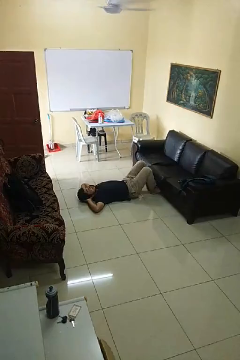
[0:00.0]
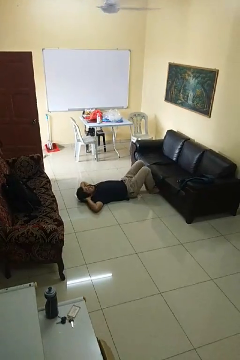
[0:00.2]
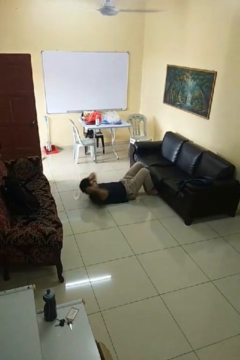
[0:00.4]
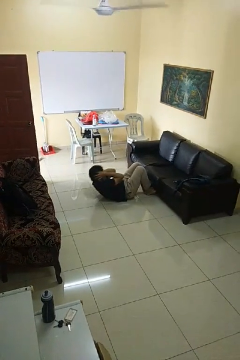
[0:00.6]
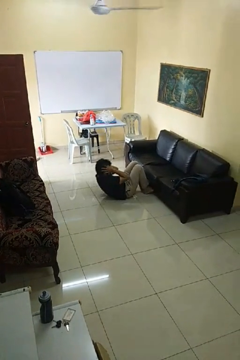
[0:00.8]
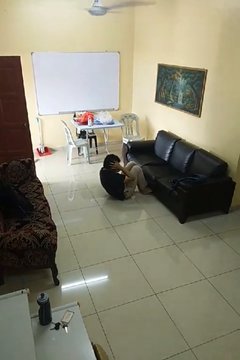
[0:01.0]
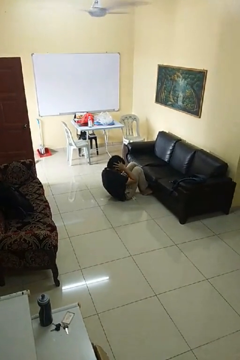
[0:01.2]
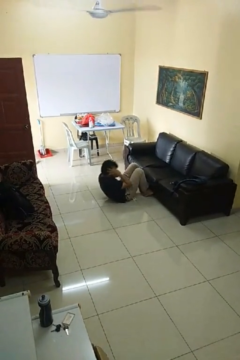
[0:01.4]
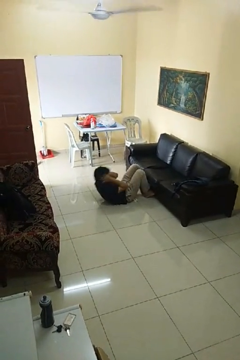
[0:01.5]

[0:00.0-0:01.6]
person exercises with situp

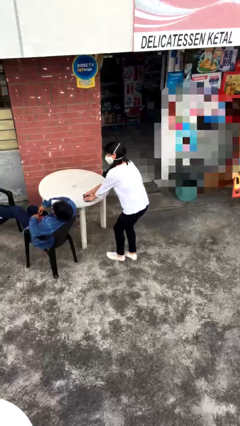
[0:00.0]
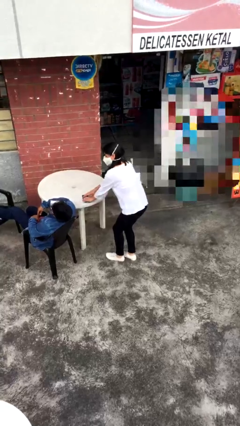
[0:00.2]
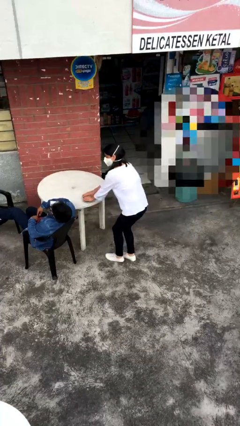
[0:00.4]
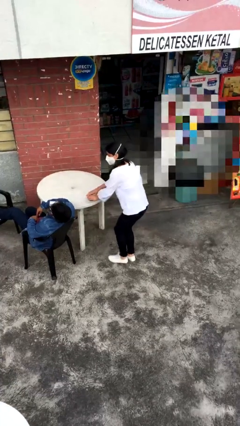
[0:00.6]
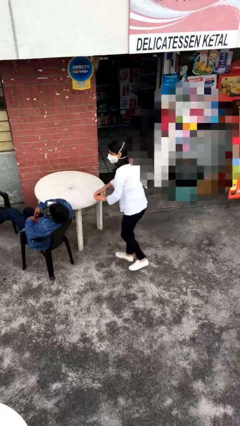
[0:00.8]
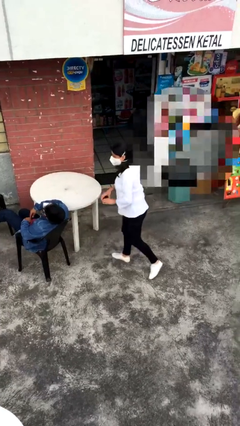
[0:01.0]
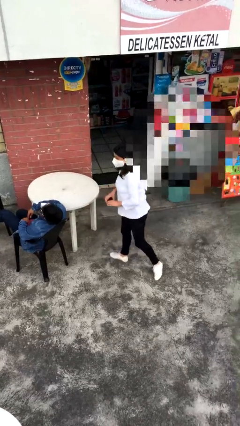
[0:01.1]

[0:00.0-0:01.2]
person steals object from person

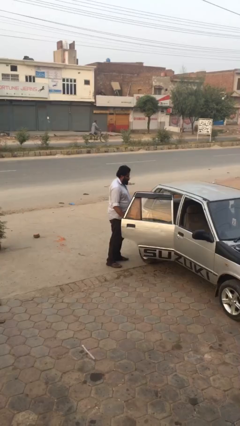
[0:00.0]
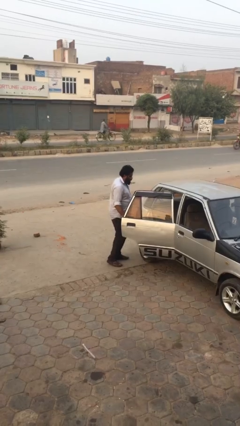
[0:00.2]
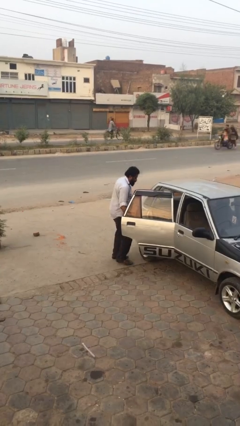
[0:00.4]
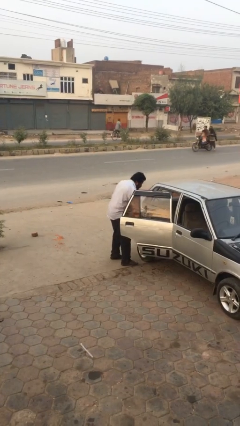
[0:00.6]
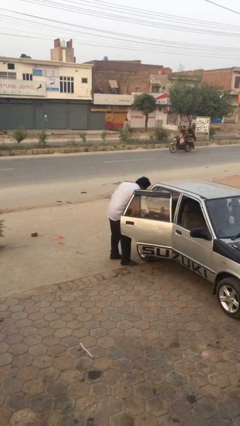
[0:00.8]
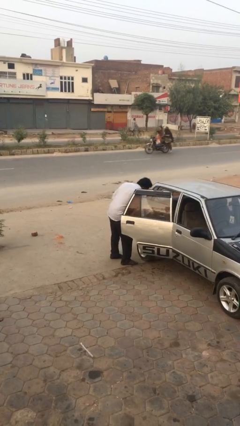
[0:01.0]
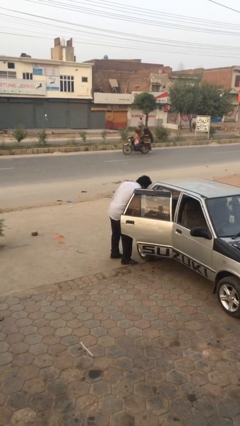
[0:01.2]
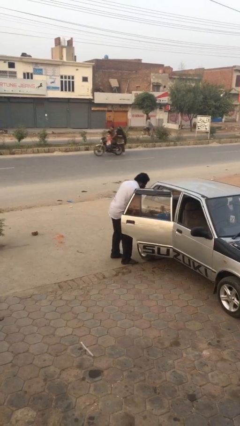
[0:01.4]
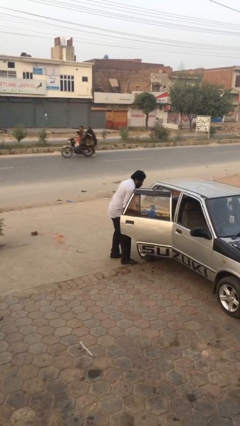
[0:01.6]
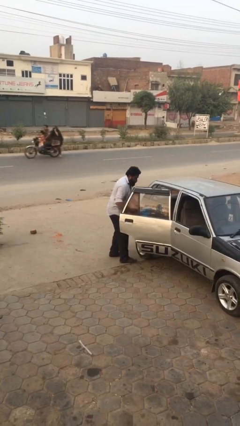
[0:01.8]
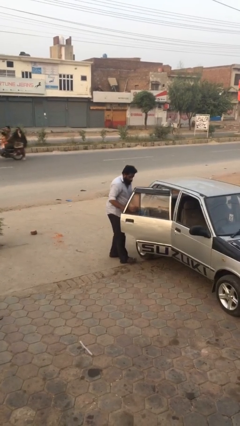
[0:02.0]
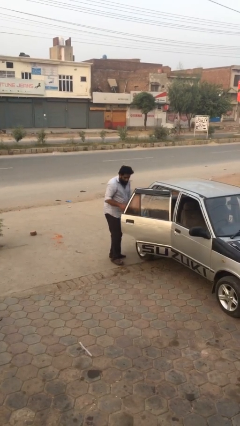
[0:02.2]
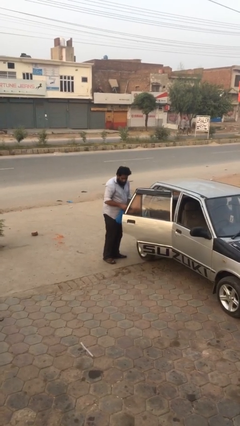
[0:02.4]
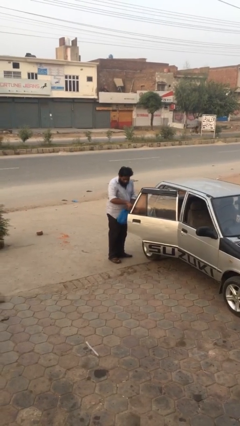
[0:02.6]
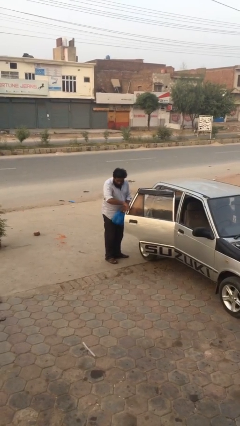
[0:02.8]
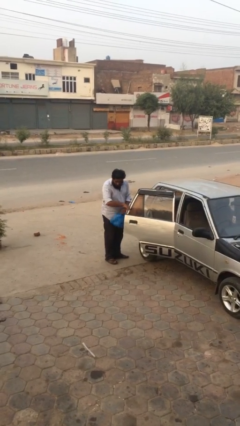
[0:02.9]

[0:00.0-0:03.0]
person unloads car

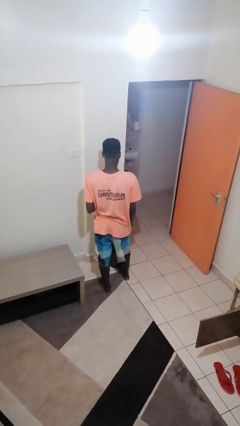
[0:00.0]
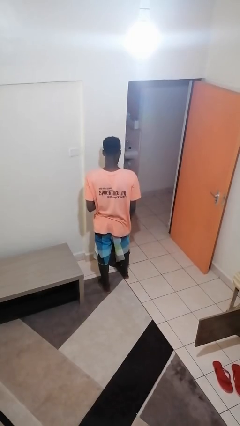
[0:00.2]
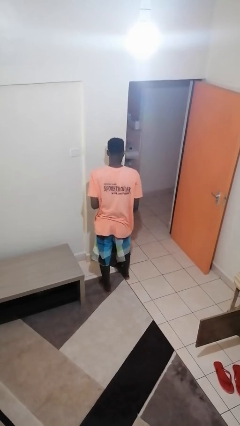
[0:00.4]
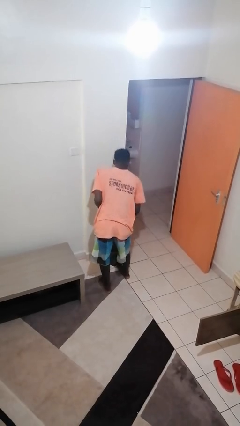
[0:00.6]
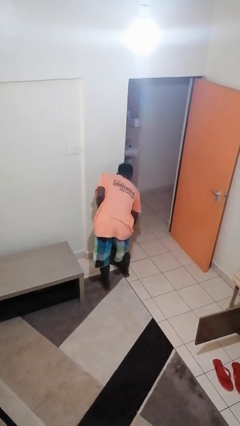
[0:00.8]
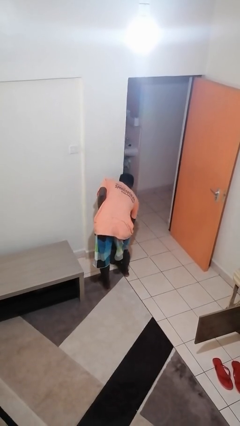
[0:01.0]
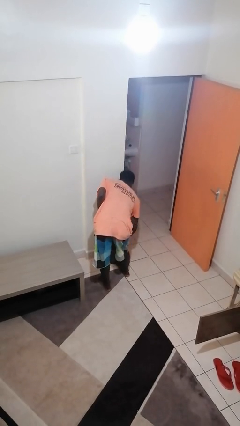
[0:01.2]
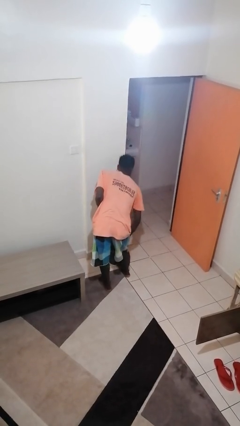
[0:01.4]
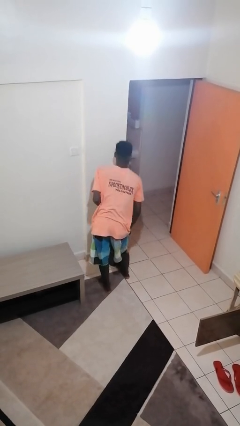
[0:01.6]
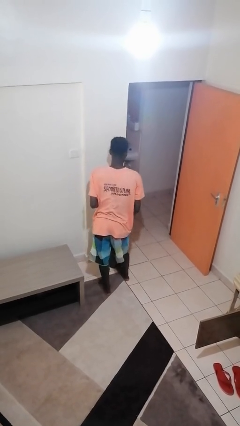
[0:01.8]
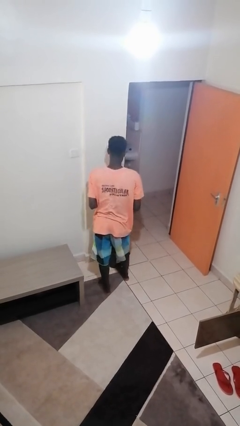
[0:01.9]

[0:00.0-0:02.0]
person discards trash

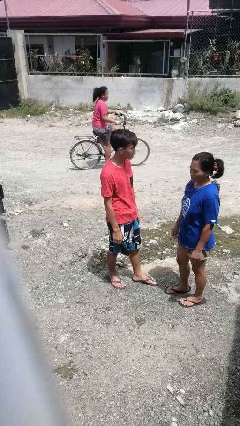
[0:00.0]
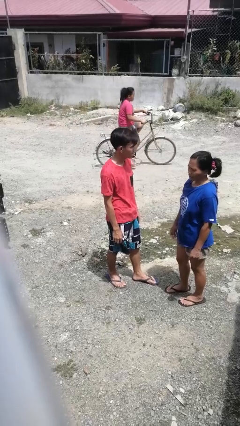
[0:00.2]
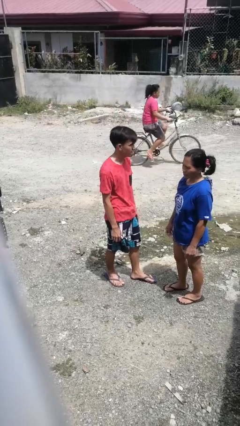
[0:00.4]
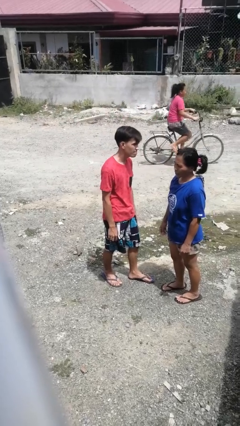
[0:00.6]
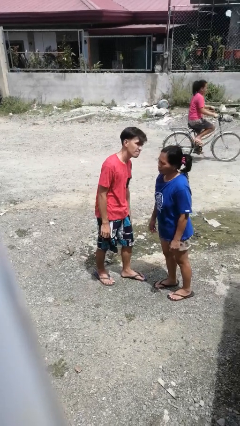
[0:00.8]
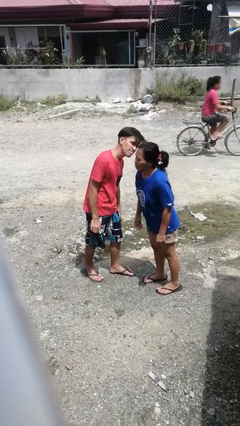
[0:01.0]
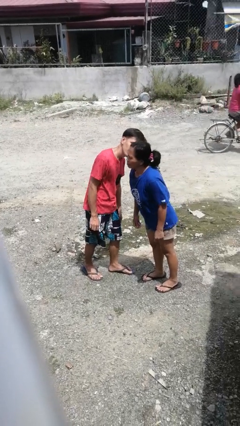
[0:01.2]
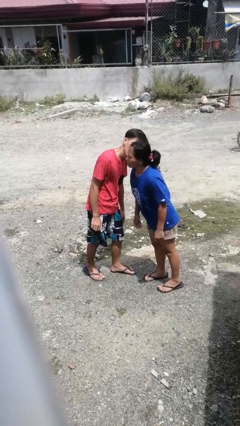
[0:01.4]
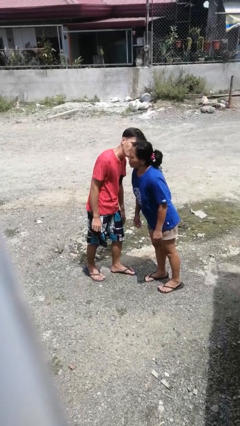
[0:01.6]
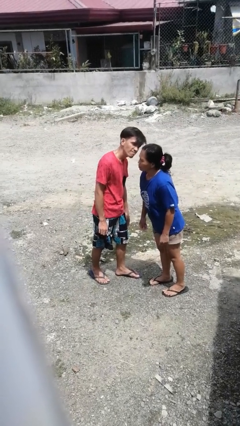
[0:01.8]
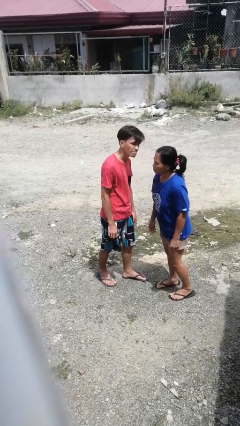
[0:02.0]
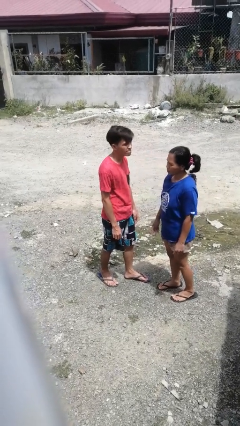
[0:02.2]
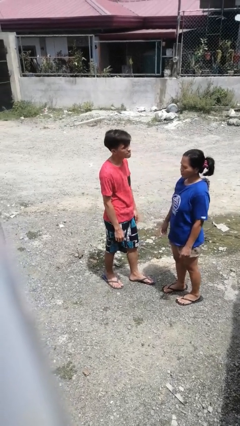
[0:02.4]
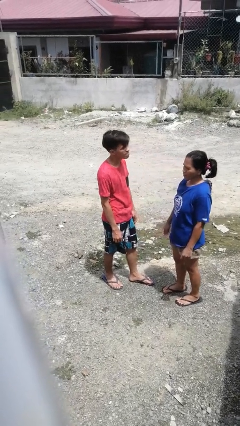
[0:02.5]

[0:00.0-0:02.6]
person kisses cheek of person

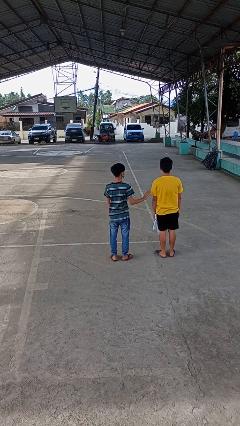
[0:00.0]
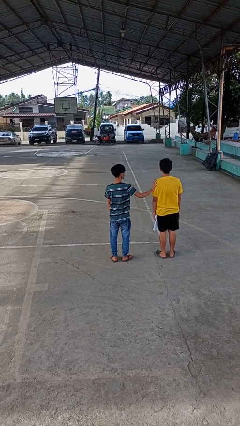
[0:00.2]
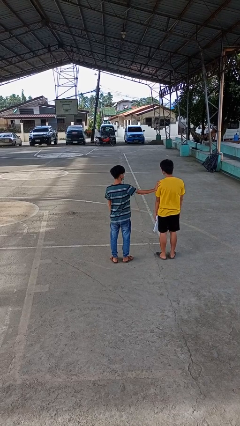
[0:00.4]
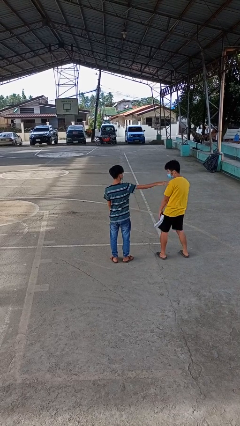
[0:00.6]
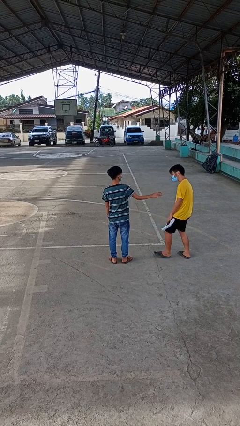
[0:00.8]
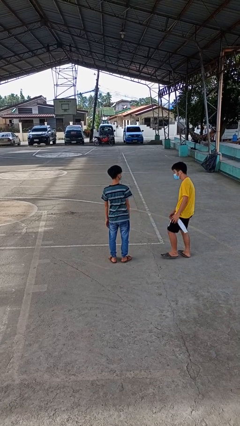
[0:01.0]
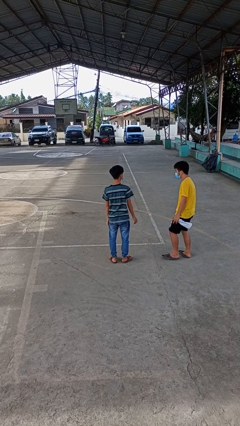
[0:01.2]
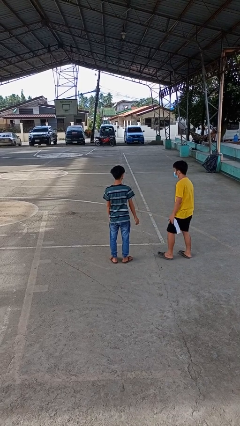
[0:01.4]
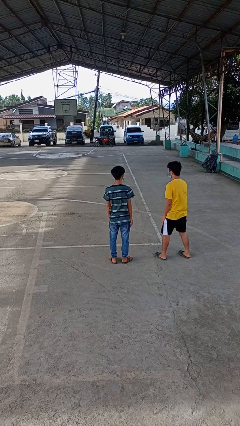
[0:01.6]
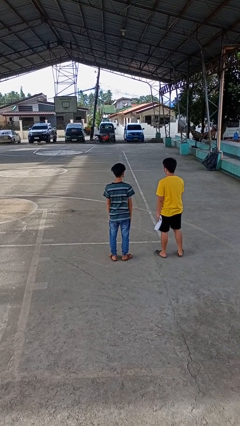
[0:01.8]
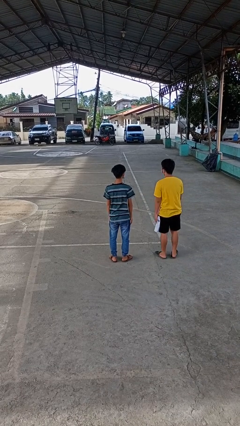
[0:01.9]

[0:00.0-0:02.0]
person shoves person

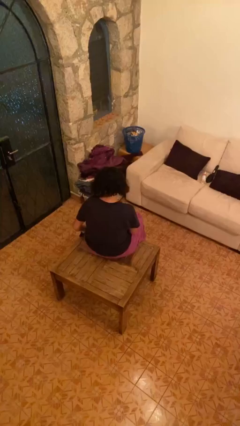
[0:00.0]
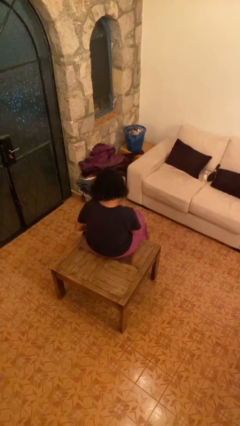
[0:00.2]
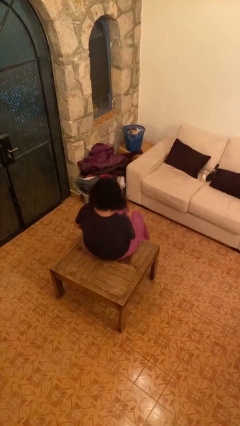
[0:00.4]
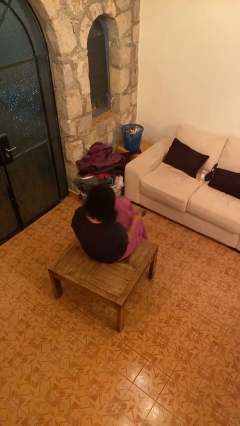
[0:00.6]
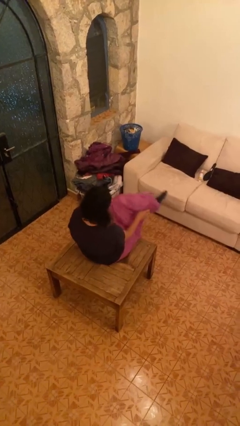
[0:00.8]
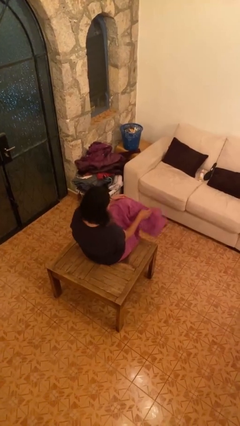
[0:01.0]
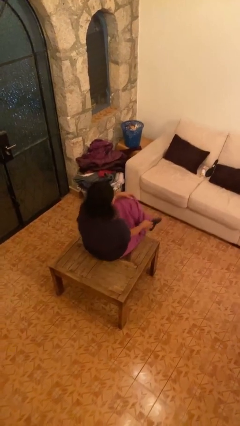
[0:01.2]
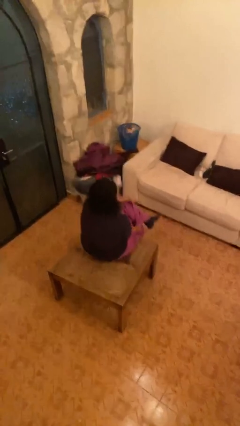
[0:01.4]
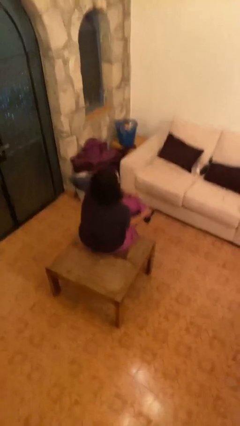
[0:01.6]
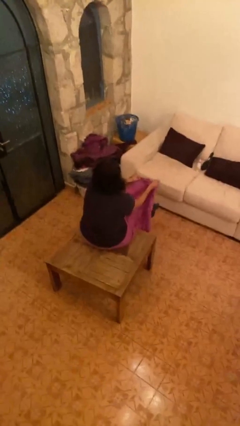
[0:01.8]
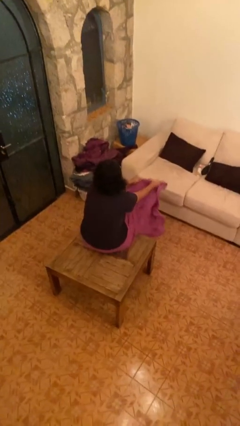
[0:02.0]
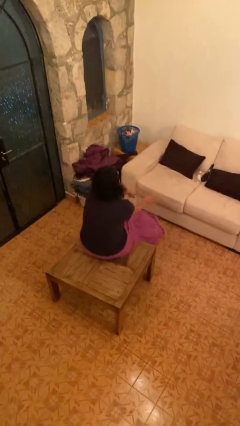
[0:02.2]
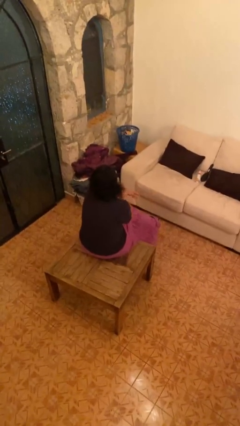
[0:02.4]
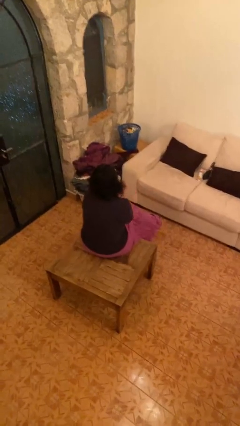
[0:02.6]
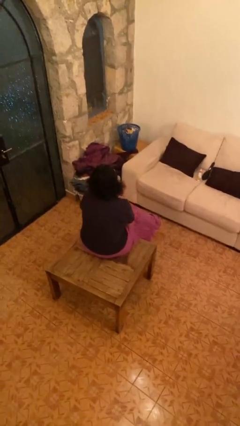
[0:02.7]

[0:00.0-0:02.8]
person crosses legs

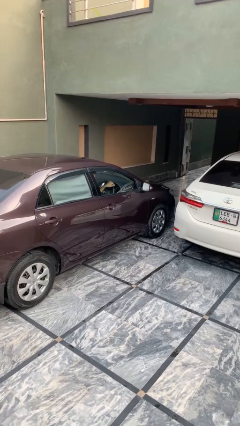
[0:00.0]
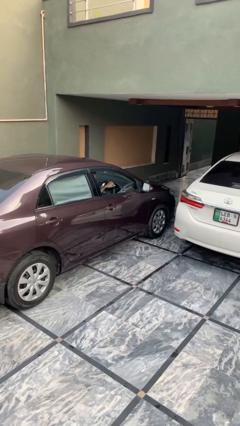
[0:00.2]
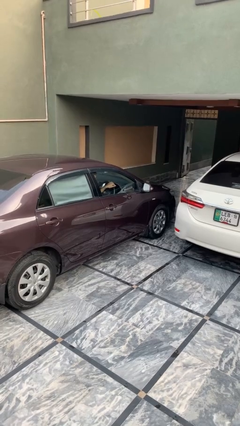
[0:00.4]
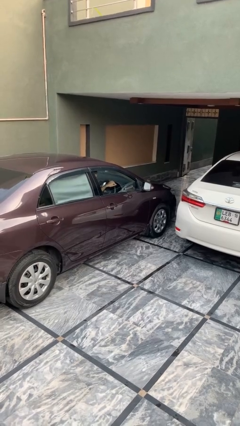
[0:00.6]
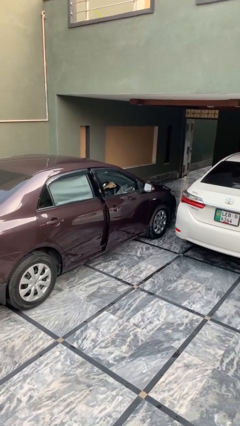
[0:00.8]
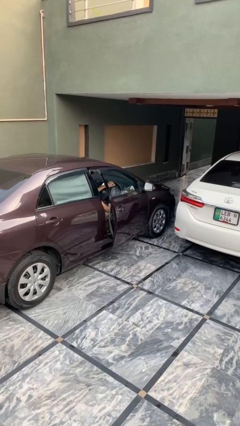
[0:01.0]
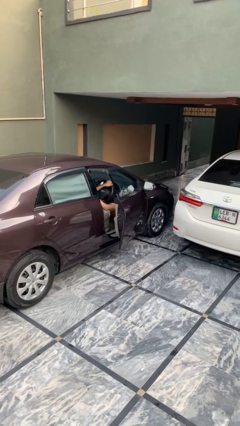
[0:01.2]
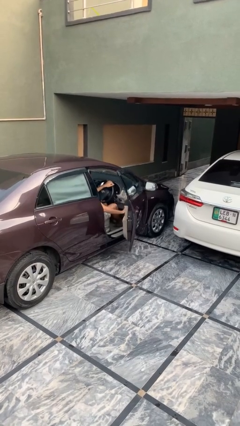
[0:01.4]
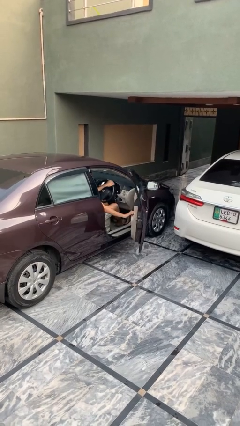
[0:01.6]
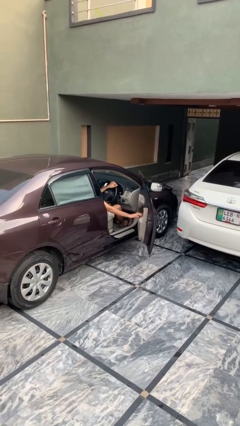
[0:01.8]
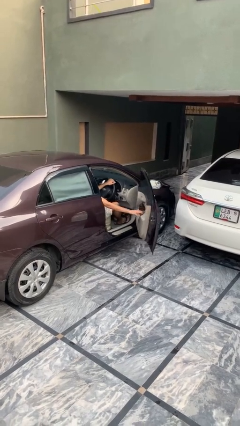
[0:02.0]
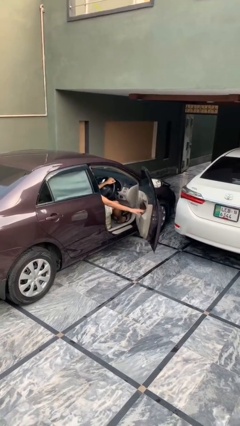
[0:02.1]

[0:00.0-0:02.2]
person opens car door

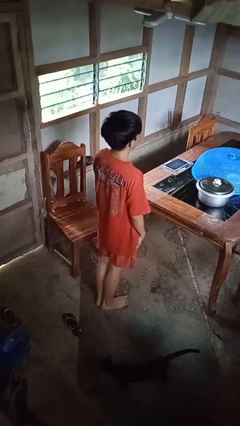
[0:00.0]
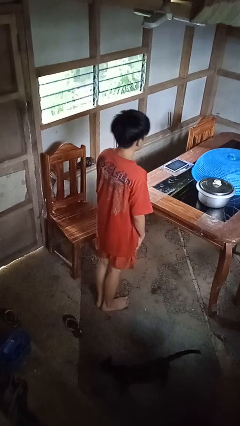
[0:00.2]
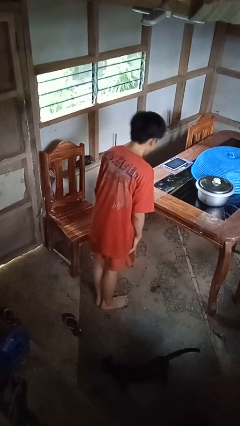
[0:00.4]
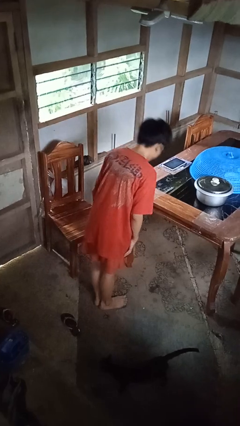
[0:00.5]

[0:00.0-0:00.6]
person bows
